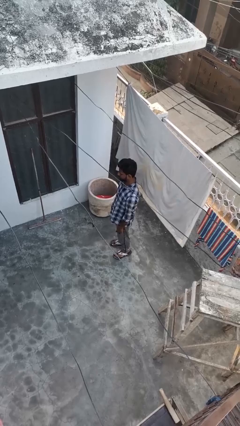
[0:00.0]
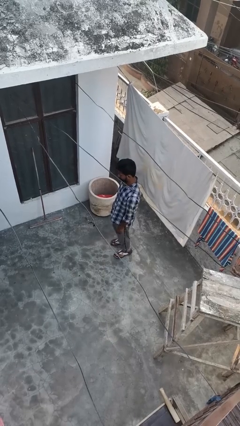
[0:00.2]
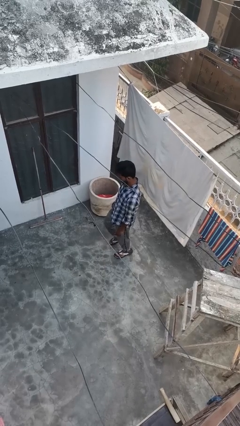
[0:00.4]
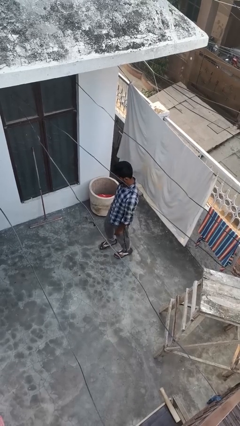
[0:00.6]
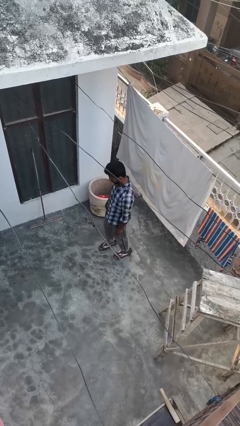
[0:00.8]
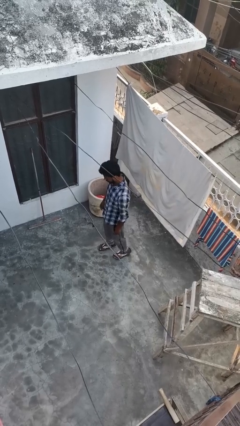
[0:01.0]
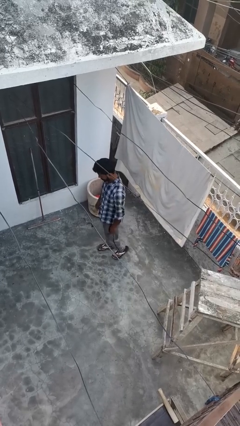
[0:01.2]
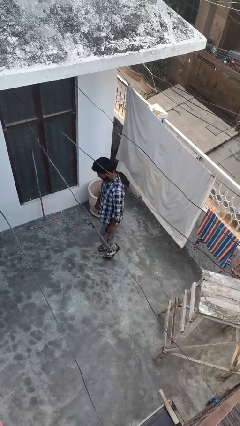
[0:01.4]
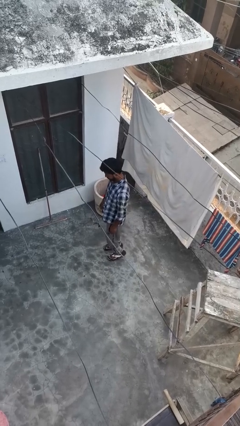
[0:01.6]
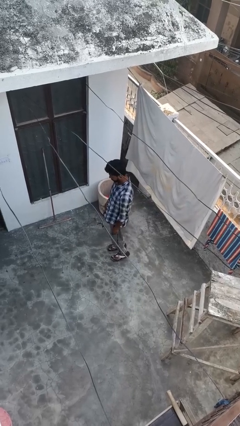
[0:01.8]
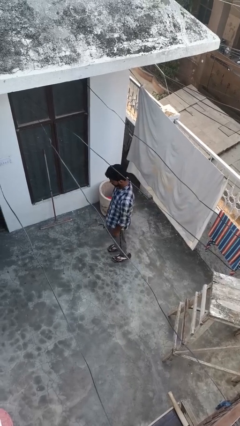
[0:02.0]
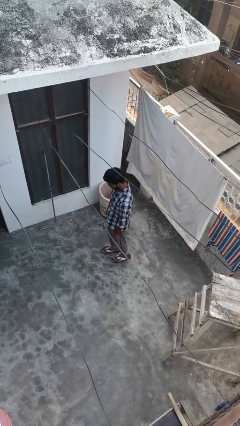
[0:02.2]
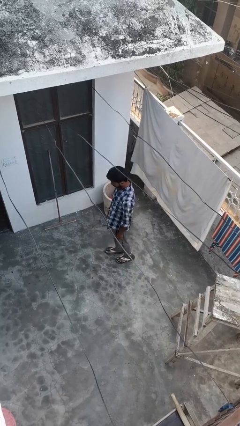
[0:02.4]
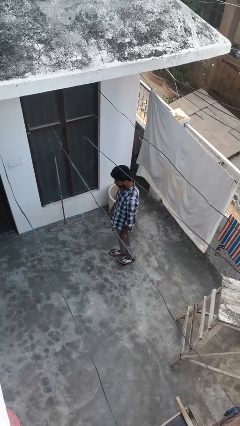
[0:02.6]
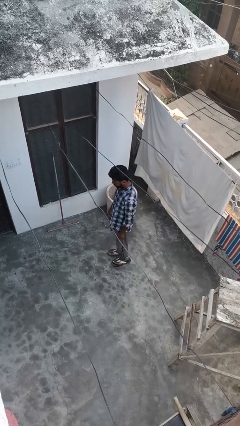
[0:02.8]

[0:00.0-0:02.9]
person walks tiptoe

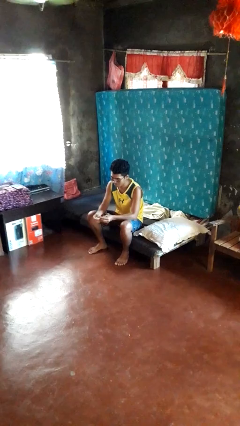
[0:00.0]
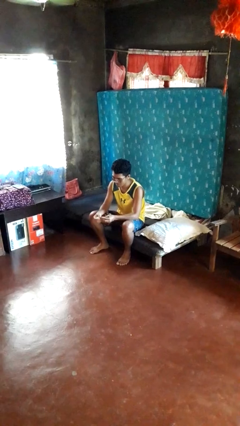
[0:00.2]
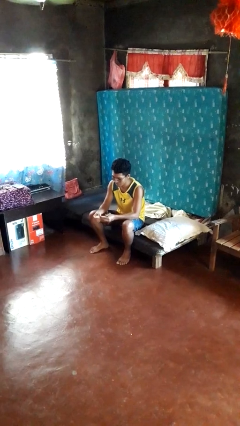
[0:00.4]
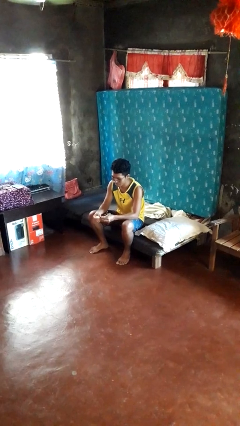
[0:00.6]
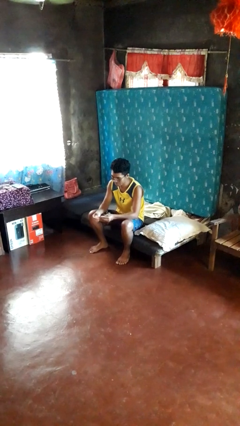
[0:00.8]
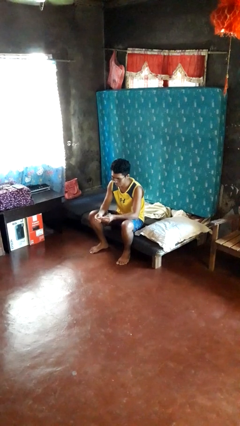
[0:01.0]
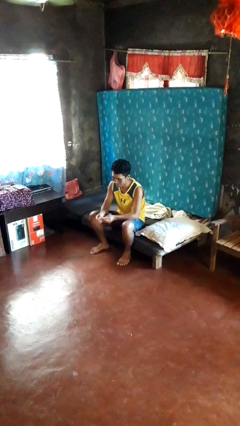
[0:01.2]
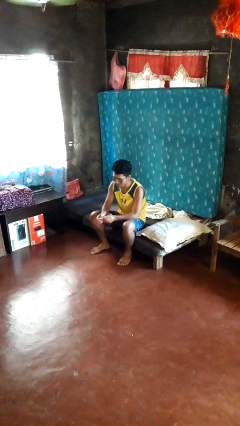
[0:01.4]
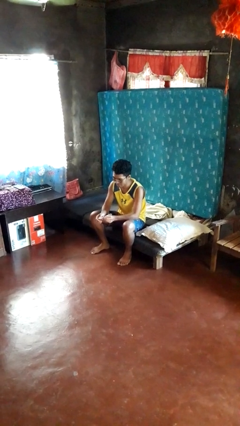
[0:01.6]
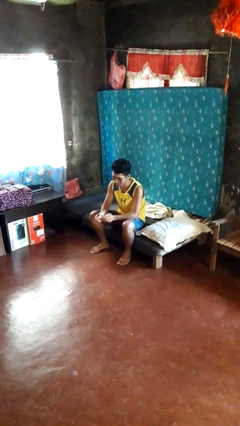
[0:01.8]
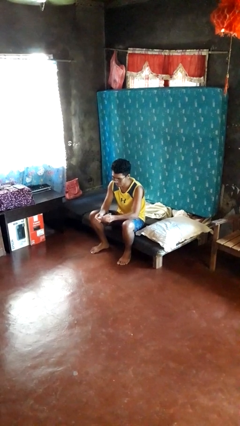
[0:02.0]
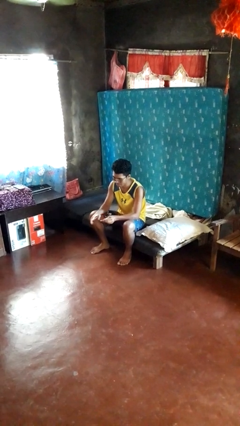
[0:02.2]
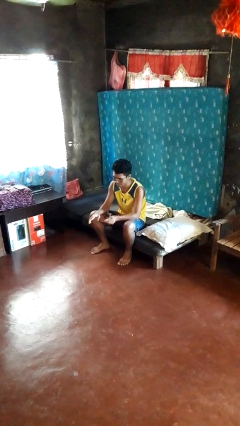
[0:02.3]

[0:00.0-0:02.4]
person files fingernails

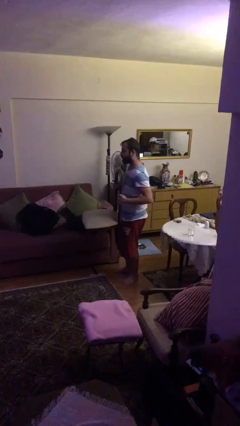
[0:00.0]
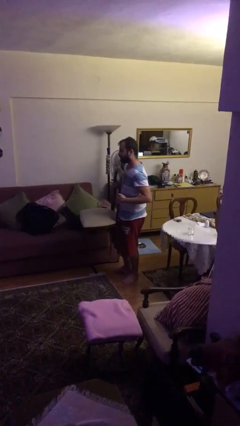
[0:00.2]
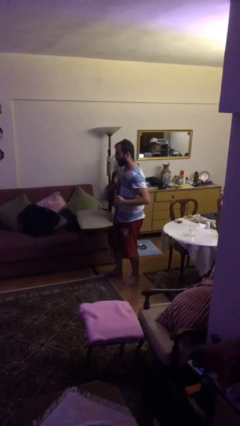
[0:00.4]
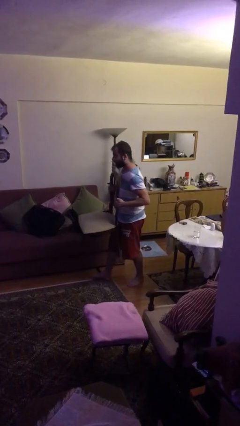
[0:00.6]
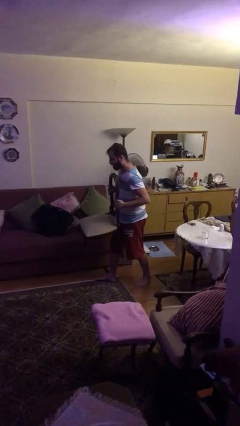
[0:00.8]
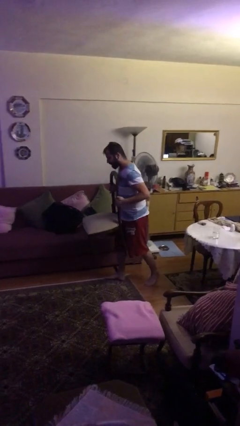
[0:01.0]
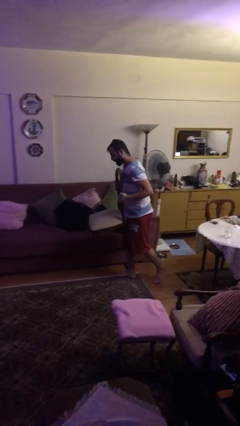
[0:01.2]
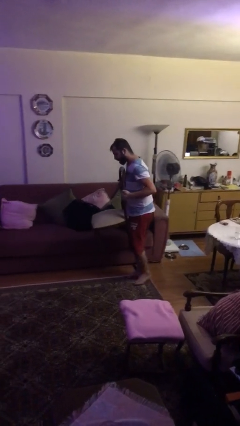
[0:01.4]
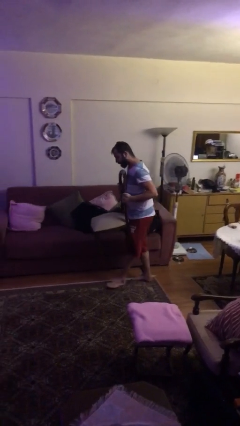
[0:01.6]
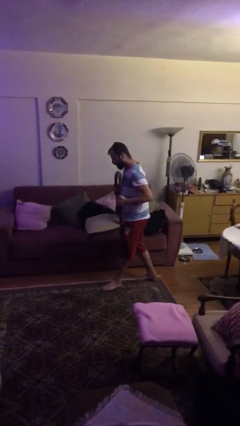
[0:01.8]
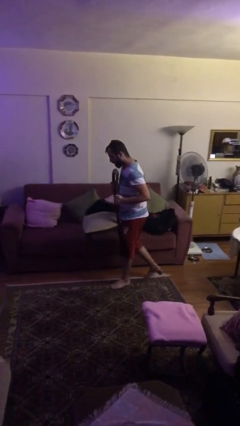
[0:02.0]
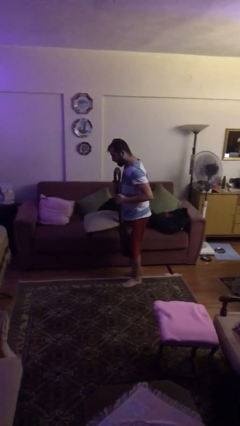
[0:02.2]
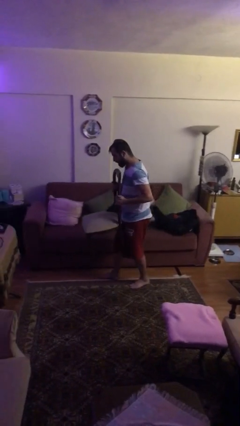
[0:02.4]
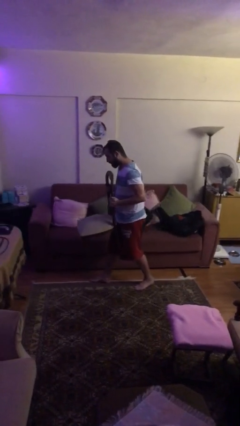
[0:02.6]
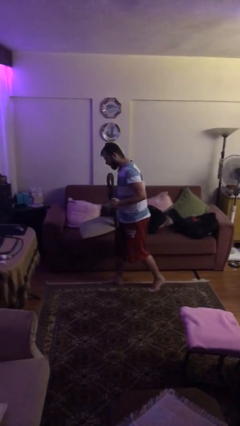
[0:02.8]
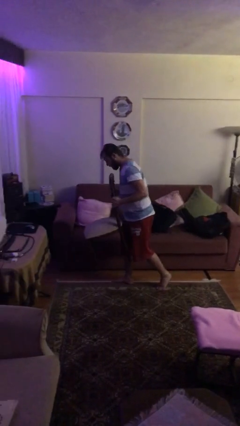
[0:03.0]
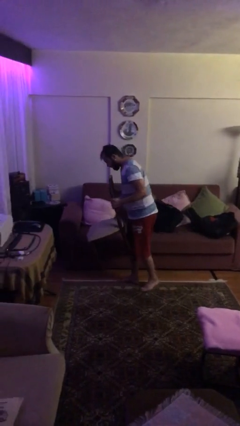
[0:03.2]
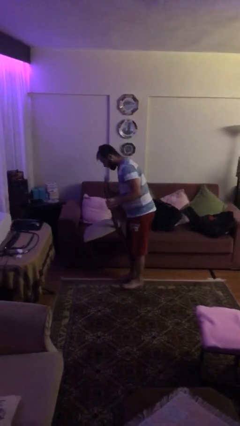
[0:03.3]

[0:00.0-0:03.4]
person carries heavy object

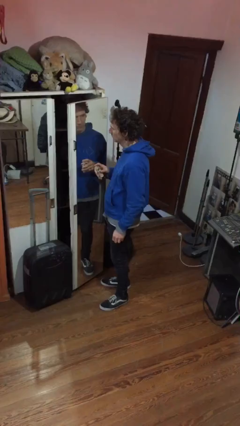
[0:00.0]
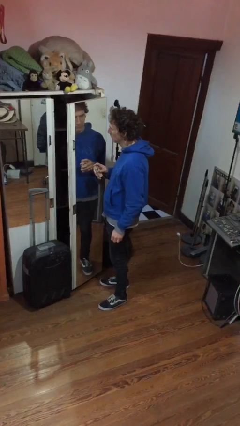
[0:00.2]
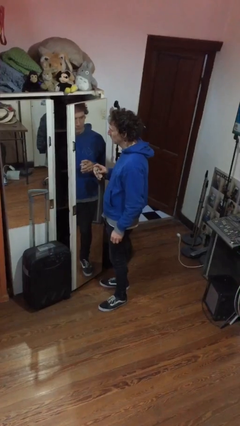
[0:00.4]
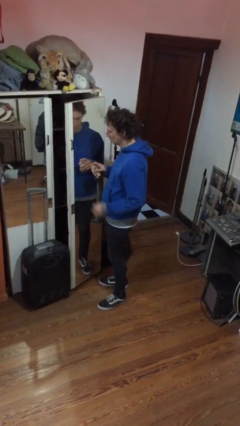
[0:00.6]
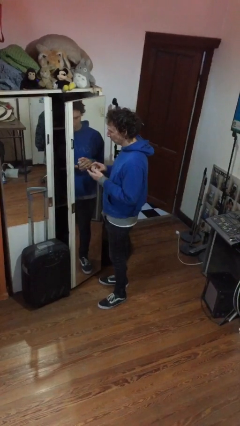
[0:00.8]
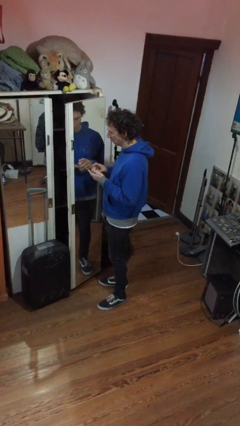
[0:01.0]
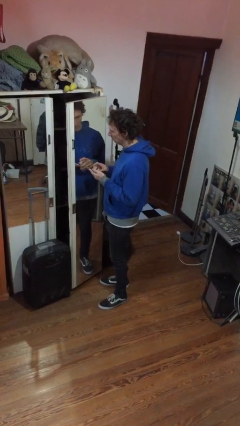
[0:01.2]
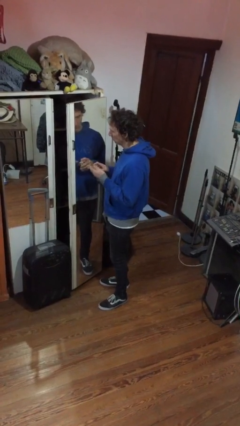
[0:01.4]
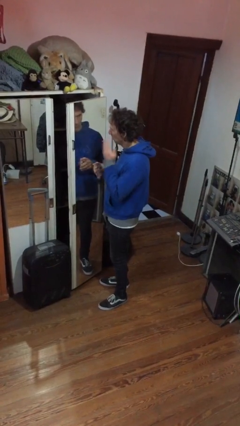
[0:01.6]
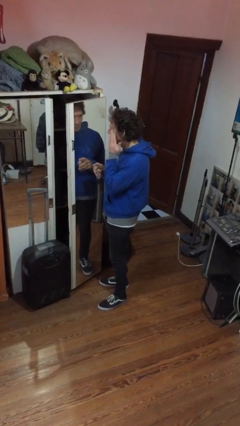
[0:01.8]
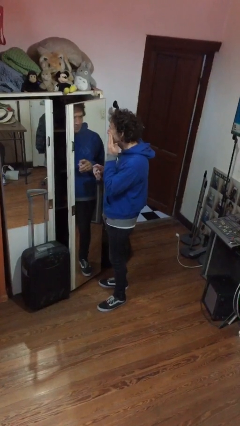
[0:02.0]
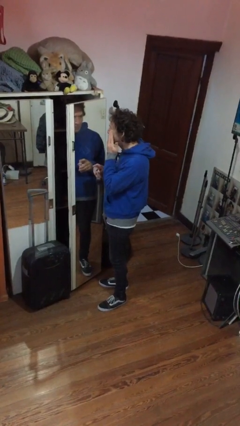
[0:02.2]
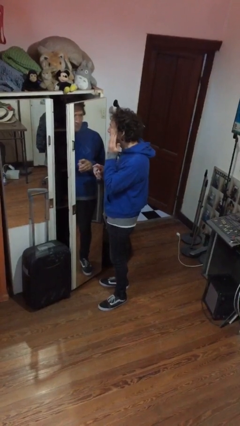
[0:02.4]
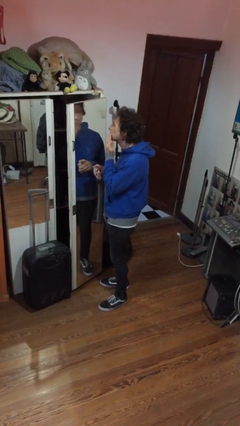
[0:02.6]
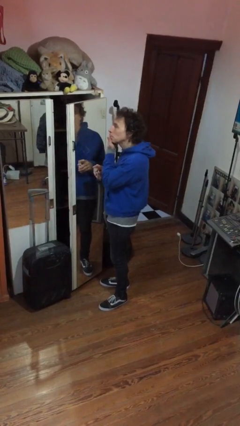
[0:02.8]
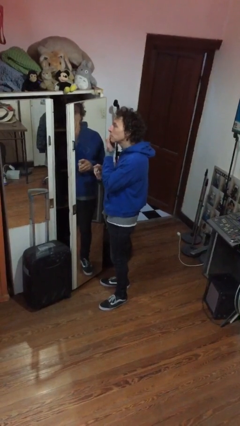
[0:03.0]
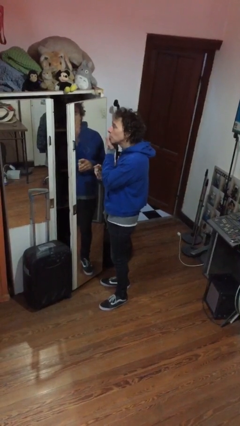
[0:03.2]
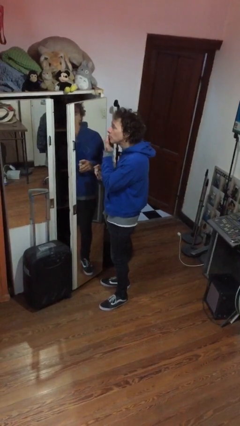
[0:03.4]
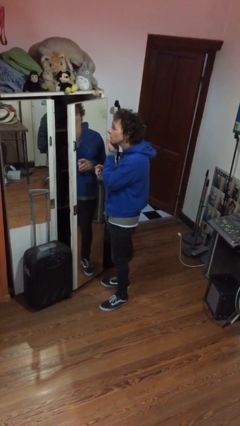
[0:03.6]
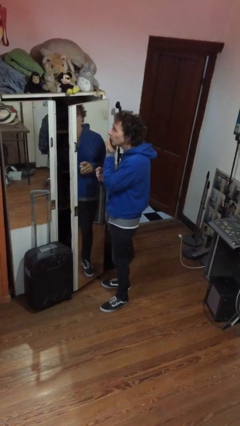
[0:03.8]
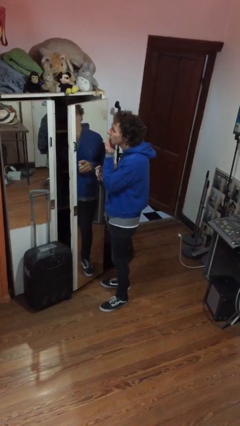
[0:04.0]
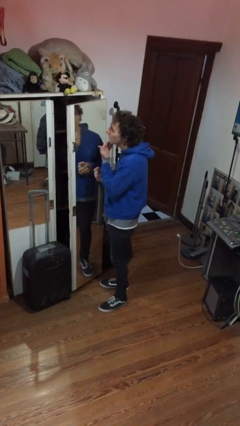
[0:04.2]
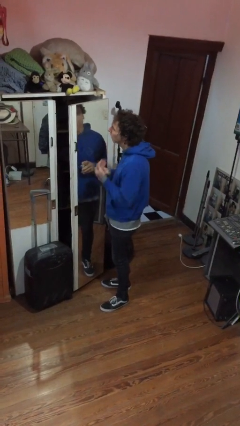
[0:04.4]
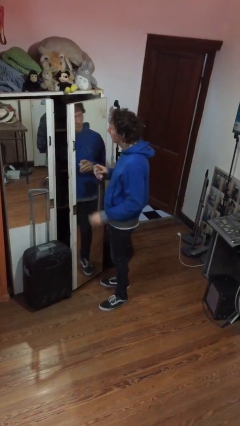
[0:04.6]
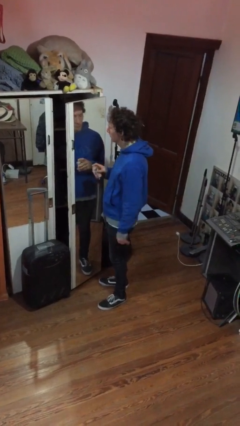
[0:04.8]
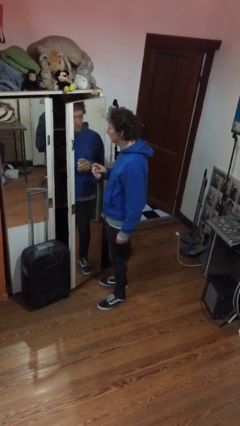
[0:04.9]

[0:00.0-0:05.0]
person applies foundation makeup

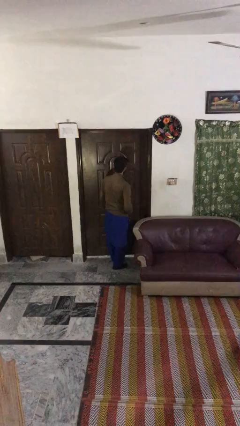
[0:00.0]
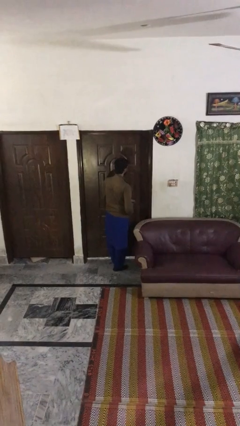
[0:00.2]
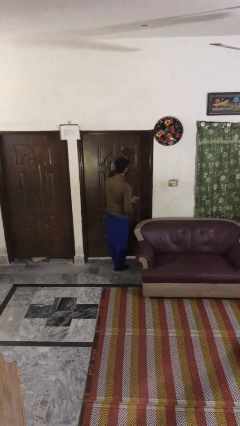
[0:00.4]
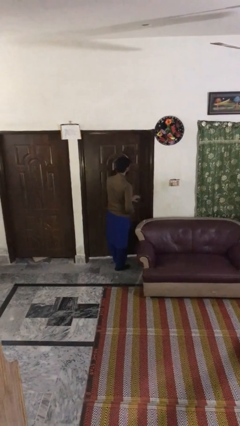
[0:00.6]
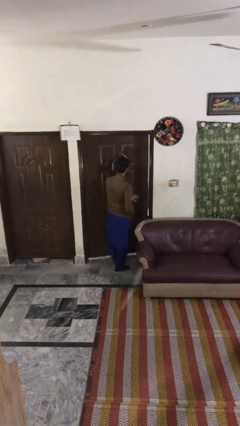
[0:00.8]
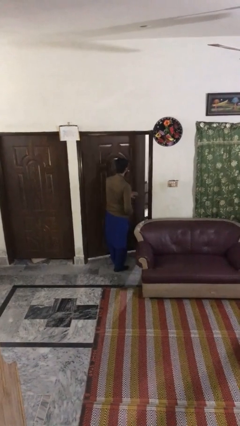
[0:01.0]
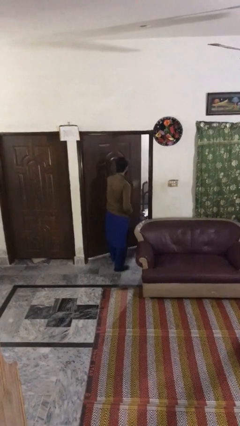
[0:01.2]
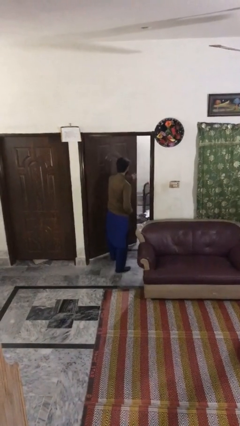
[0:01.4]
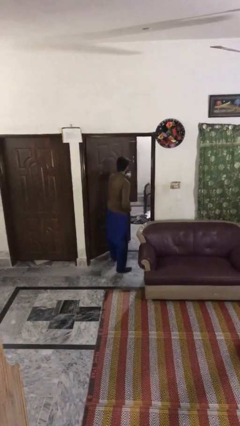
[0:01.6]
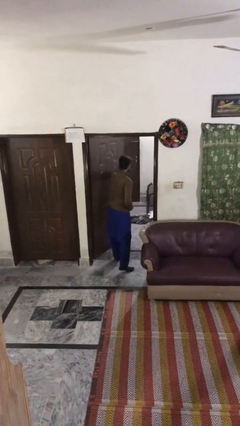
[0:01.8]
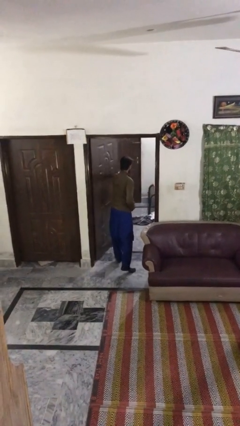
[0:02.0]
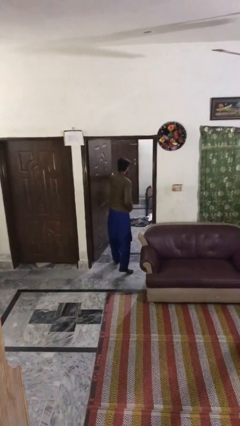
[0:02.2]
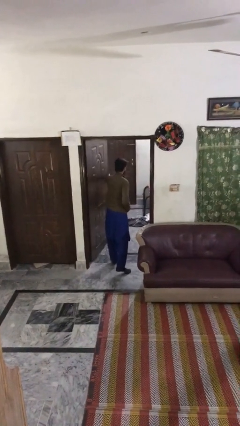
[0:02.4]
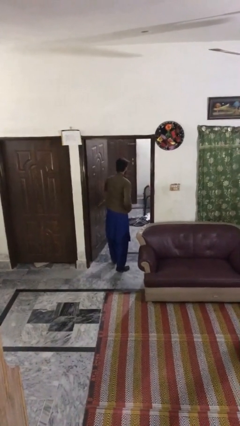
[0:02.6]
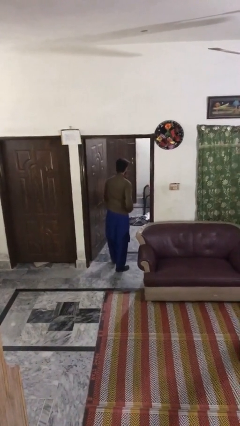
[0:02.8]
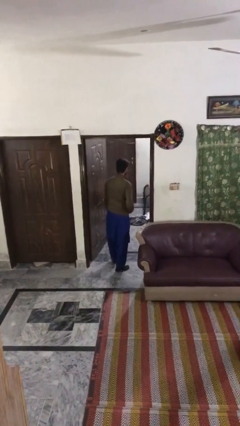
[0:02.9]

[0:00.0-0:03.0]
person opens facility door

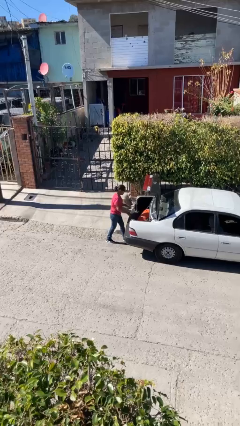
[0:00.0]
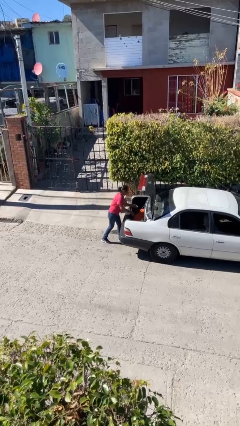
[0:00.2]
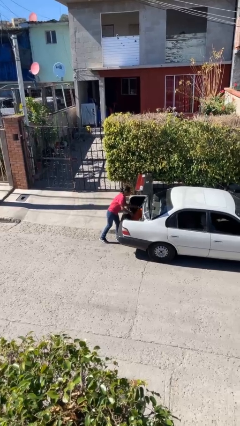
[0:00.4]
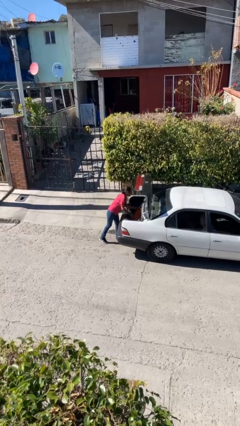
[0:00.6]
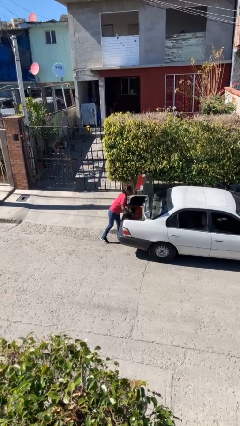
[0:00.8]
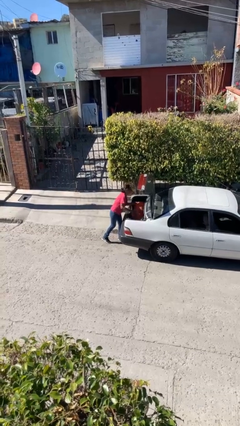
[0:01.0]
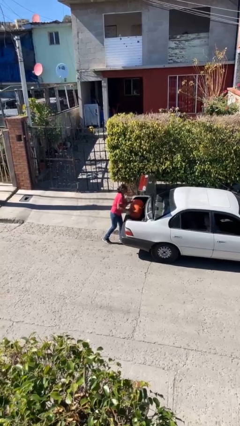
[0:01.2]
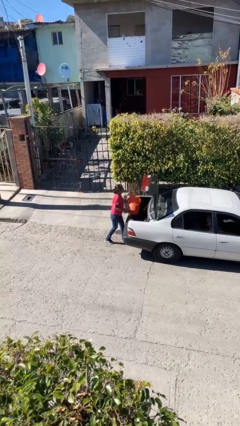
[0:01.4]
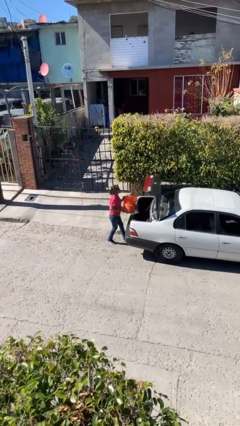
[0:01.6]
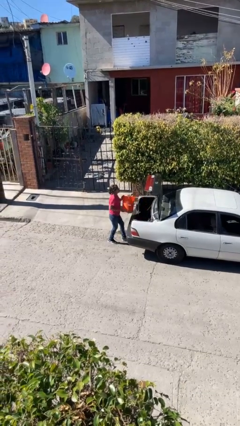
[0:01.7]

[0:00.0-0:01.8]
person unloads car
